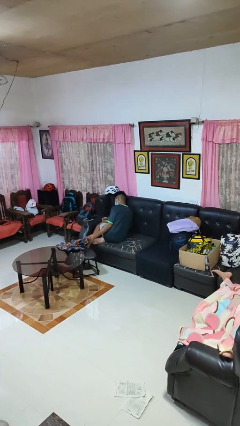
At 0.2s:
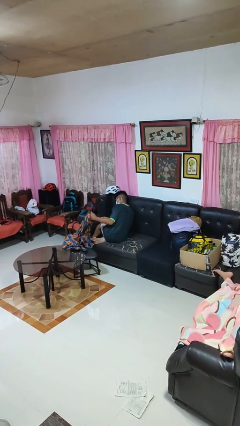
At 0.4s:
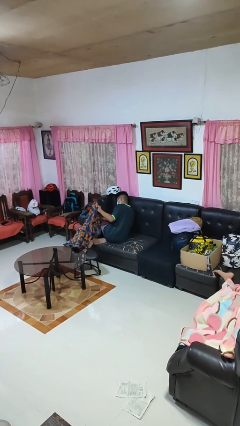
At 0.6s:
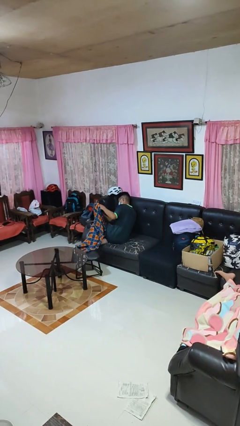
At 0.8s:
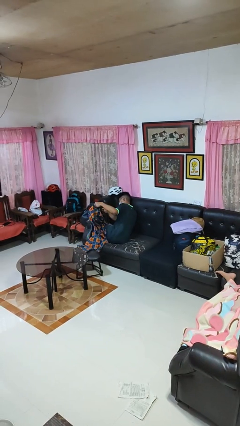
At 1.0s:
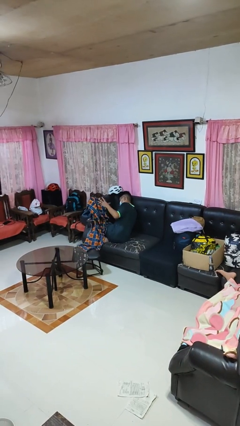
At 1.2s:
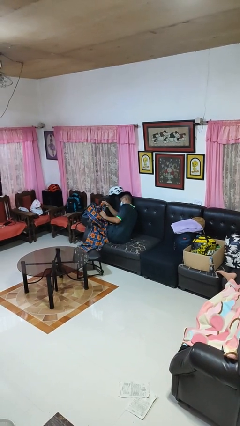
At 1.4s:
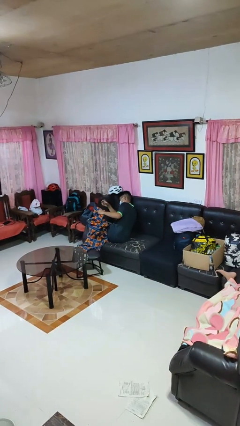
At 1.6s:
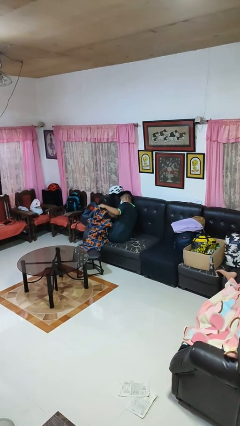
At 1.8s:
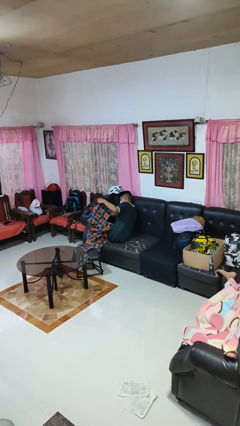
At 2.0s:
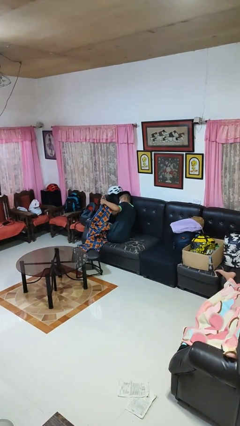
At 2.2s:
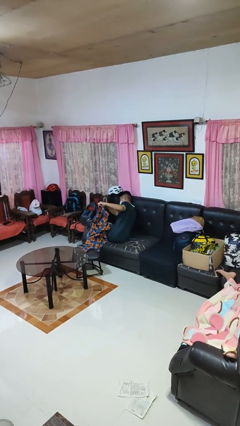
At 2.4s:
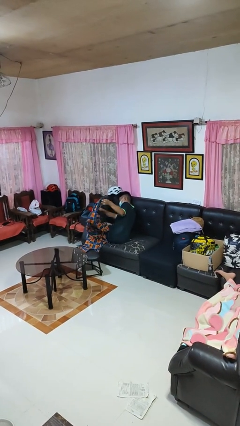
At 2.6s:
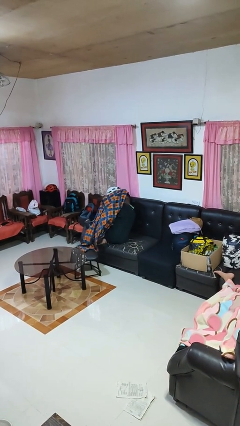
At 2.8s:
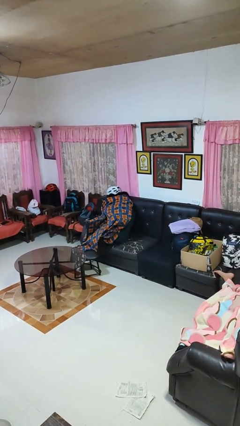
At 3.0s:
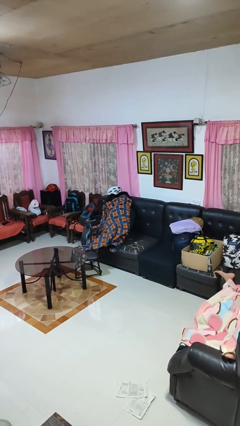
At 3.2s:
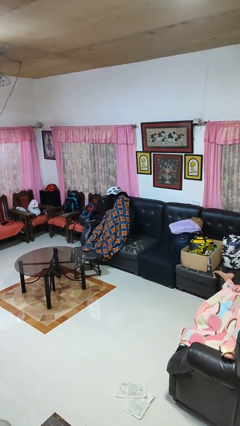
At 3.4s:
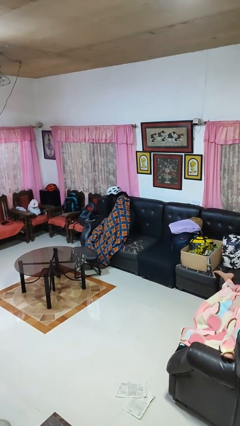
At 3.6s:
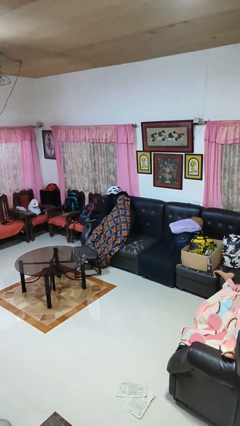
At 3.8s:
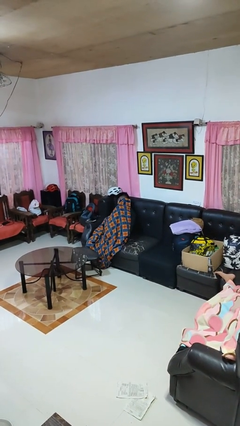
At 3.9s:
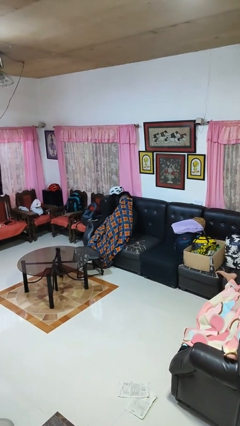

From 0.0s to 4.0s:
person covers with blanket

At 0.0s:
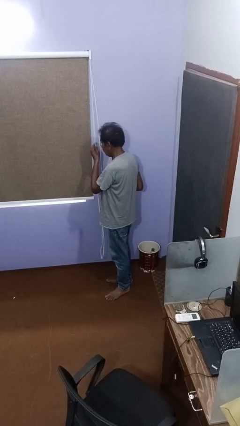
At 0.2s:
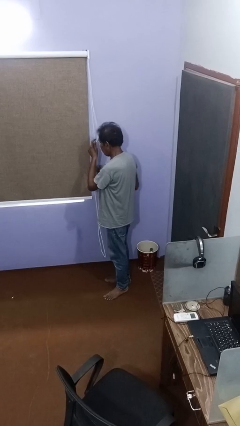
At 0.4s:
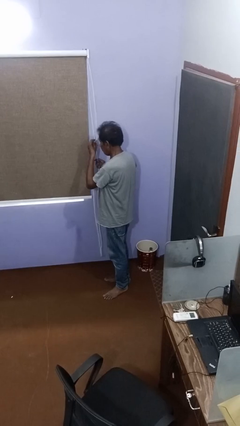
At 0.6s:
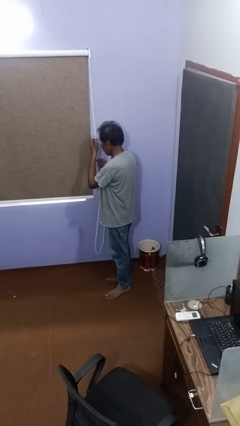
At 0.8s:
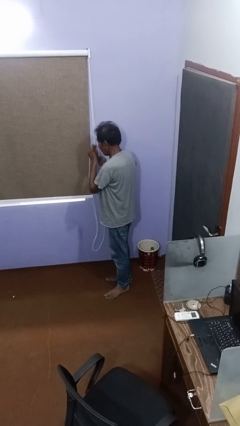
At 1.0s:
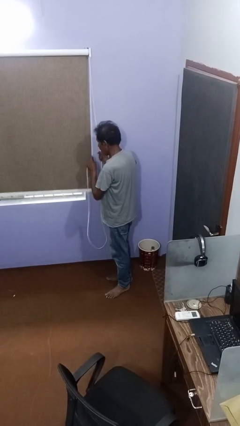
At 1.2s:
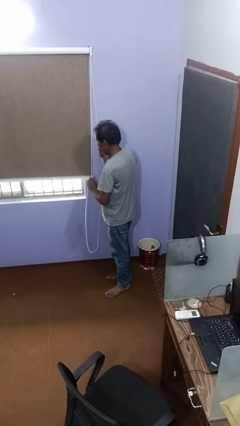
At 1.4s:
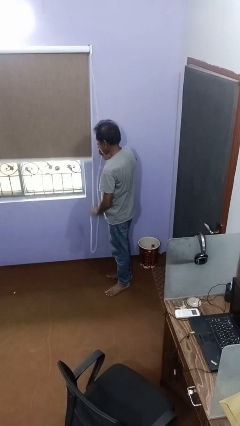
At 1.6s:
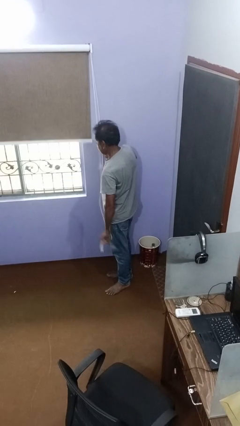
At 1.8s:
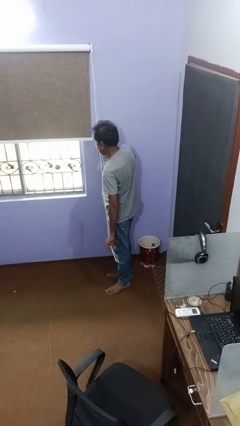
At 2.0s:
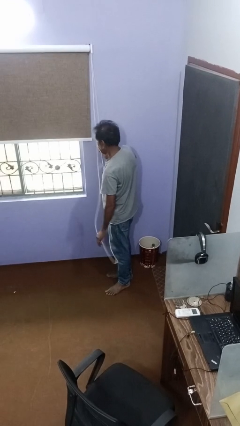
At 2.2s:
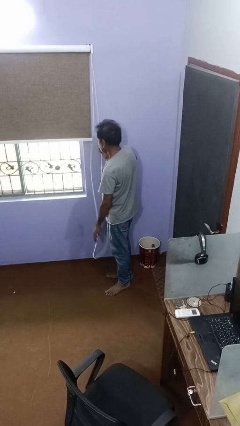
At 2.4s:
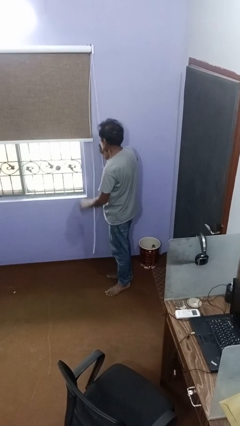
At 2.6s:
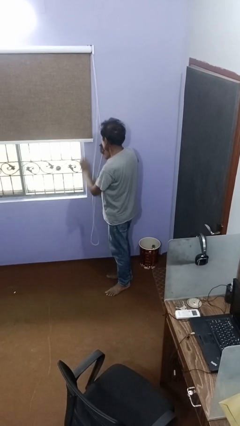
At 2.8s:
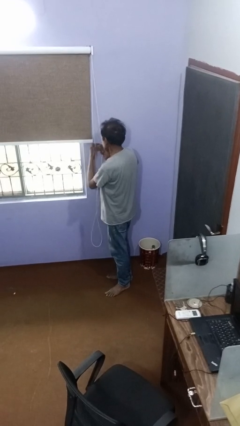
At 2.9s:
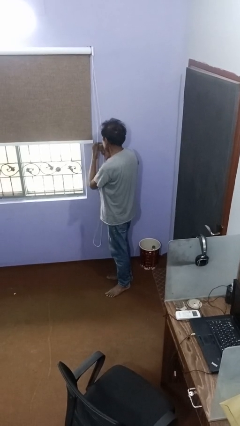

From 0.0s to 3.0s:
person opens curtains

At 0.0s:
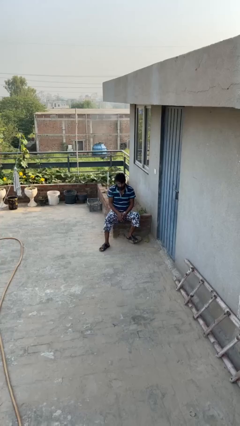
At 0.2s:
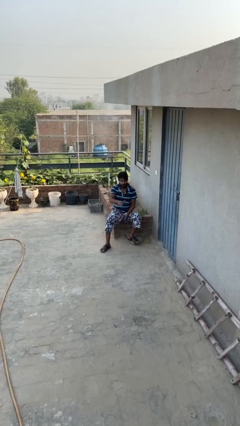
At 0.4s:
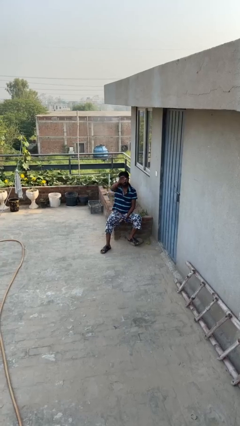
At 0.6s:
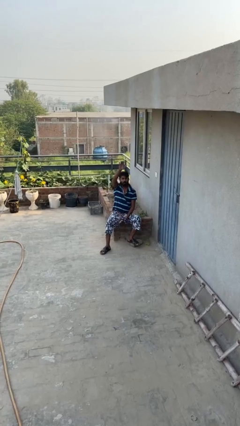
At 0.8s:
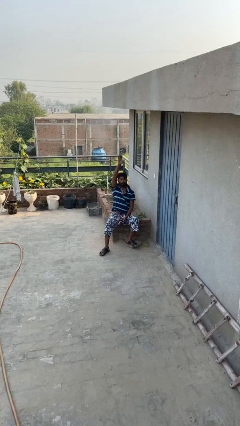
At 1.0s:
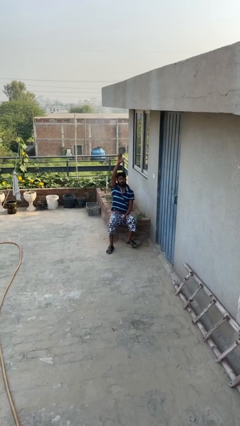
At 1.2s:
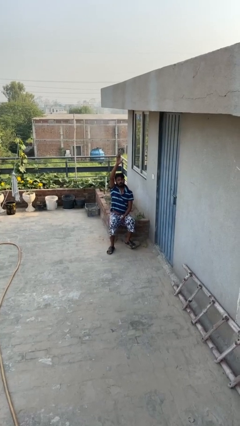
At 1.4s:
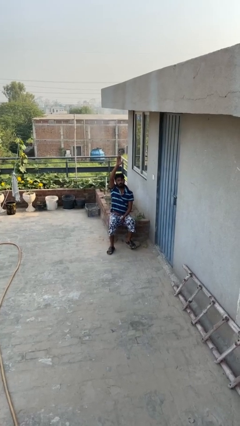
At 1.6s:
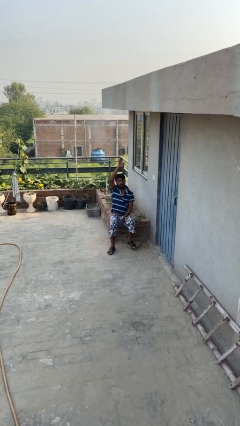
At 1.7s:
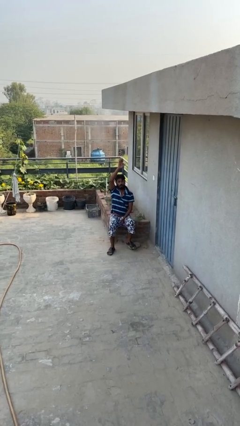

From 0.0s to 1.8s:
person gestures raise hand

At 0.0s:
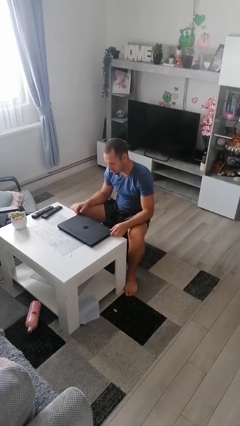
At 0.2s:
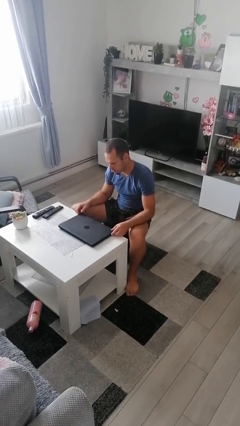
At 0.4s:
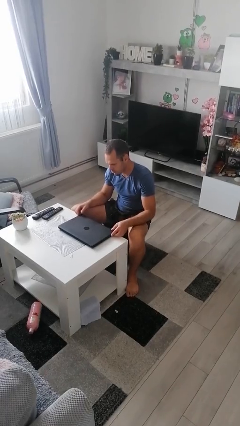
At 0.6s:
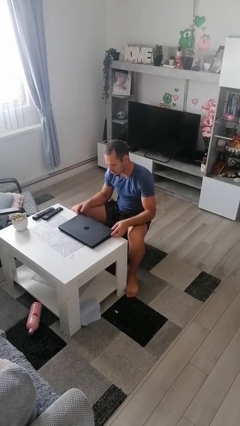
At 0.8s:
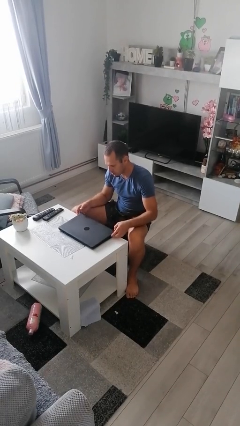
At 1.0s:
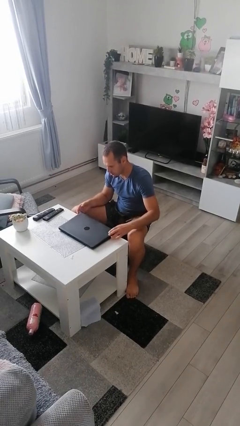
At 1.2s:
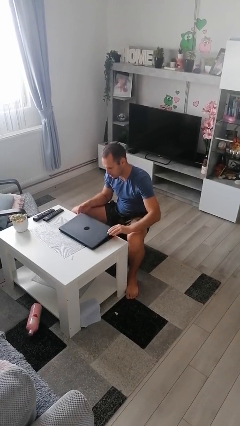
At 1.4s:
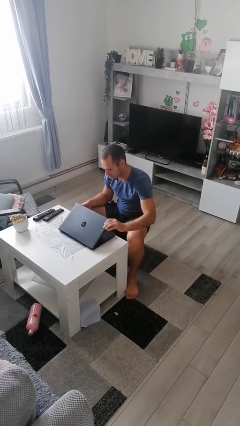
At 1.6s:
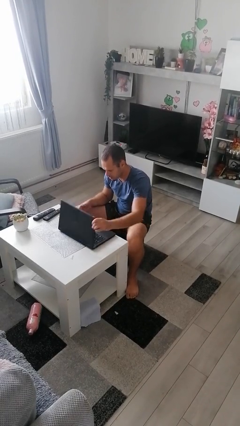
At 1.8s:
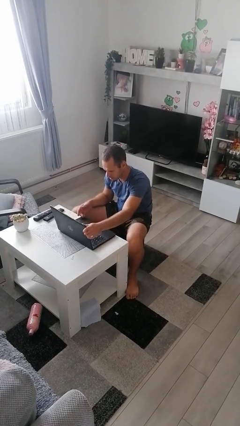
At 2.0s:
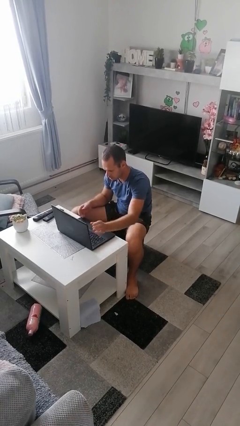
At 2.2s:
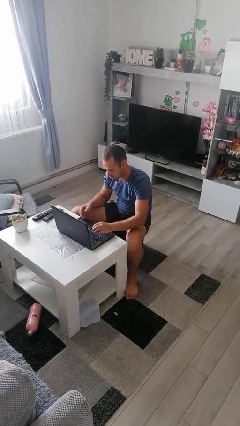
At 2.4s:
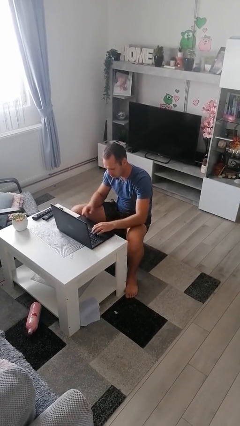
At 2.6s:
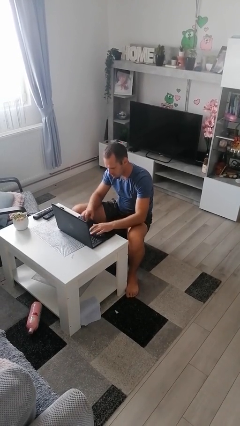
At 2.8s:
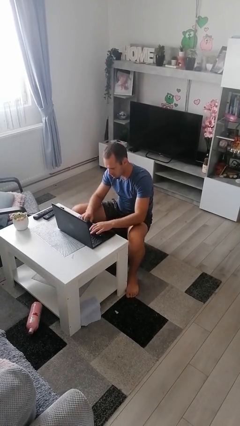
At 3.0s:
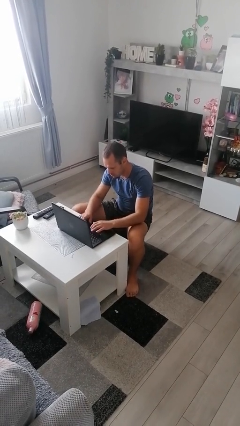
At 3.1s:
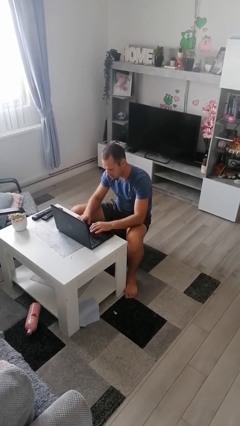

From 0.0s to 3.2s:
person opens laptop

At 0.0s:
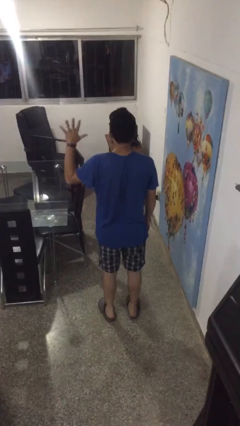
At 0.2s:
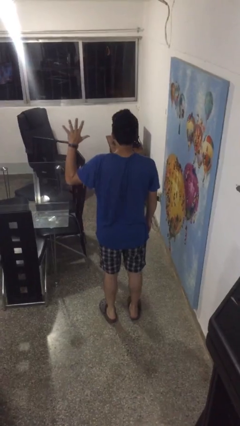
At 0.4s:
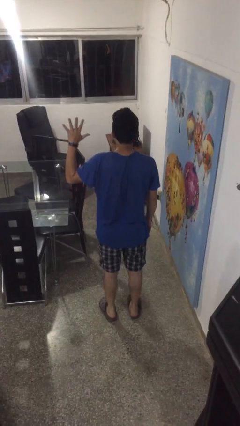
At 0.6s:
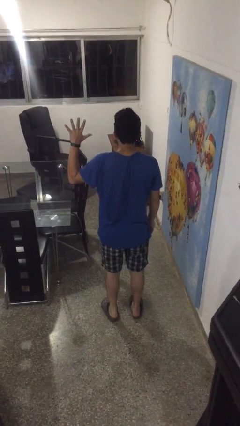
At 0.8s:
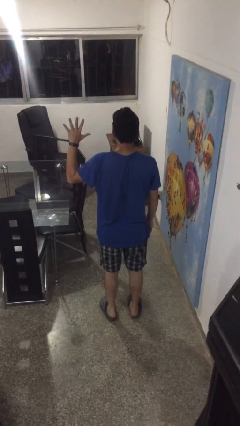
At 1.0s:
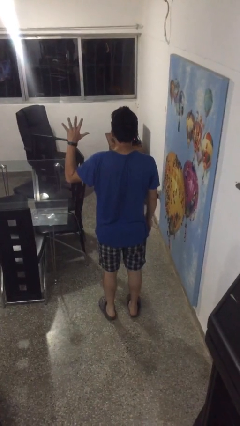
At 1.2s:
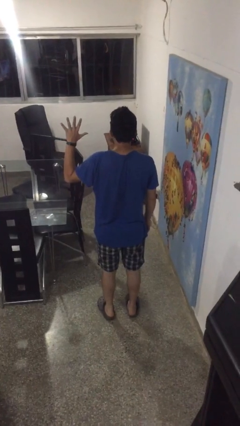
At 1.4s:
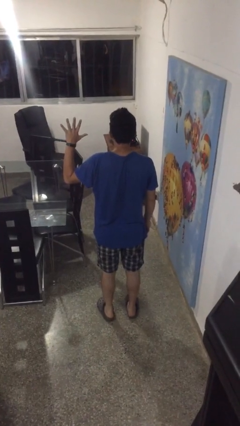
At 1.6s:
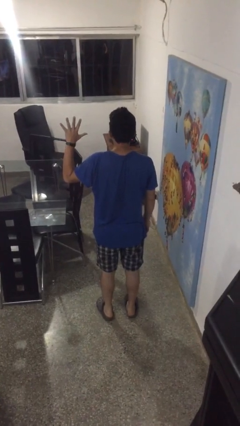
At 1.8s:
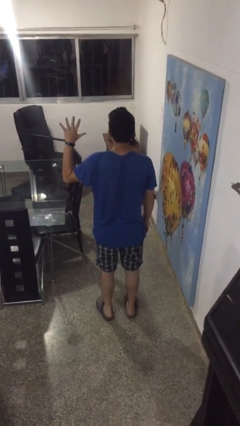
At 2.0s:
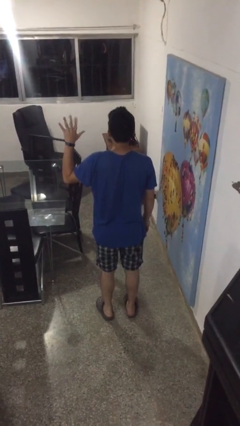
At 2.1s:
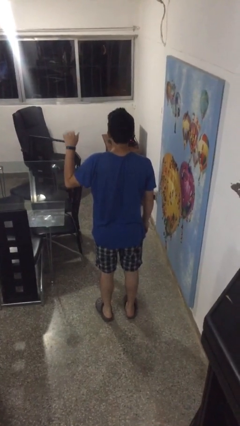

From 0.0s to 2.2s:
person gestures number five

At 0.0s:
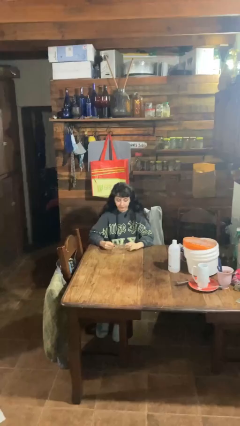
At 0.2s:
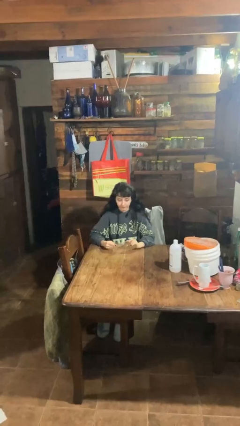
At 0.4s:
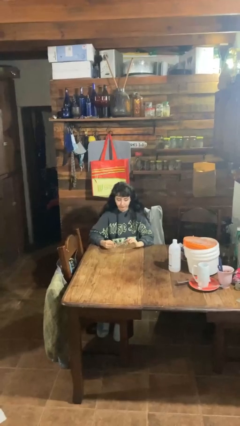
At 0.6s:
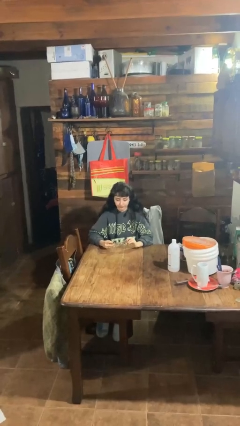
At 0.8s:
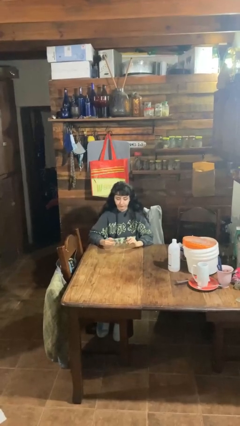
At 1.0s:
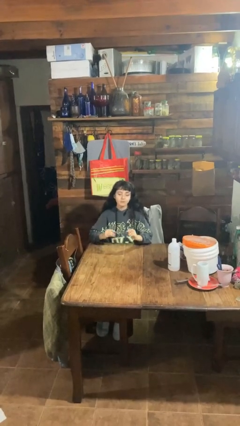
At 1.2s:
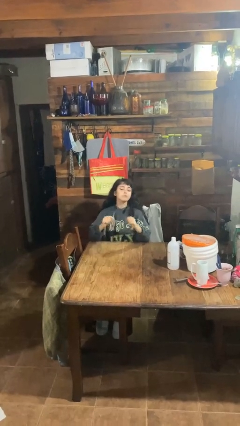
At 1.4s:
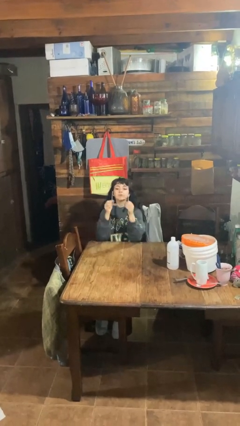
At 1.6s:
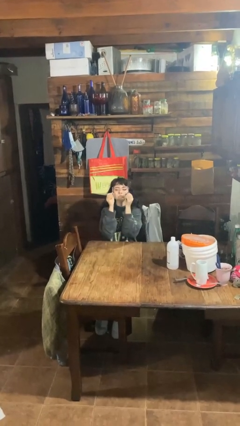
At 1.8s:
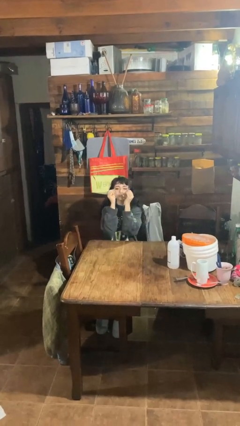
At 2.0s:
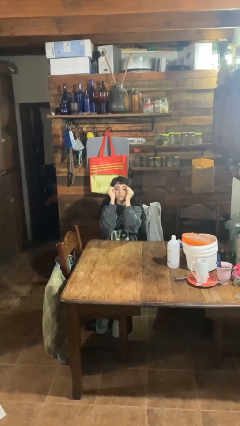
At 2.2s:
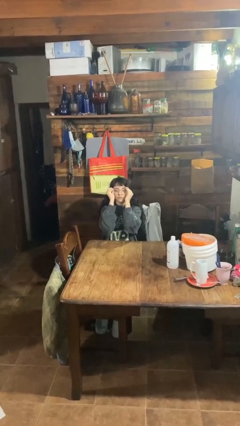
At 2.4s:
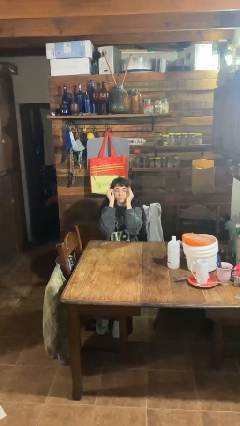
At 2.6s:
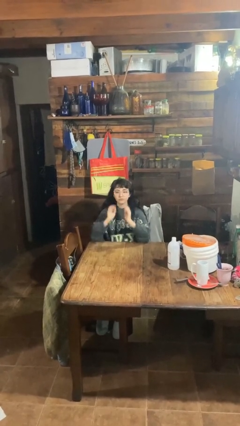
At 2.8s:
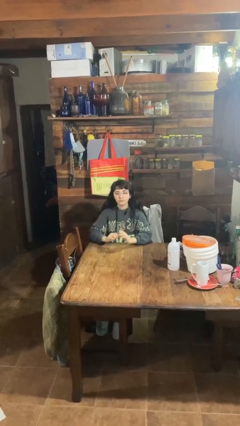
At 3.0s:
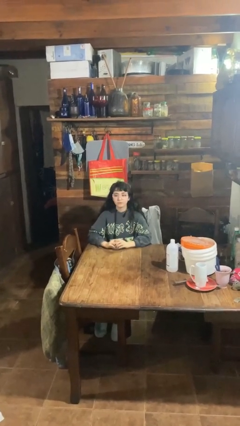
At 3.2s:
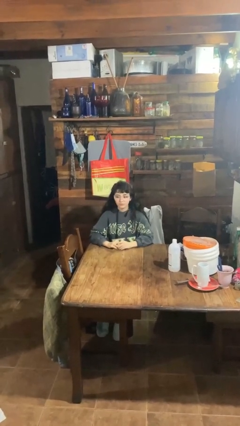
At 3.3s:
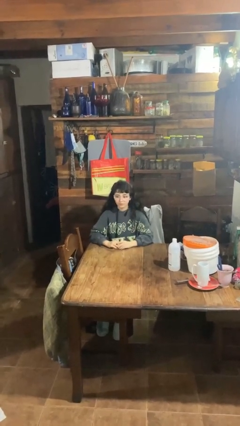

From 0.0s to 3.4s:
person puts on glasses
